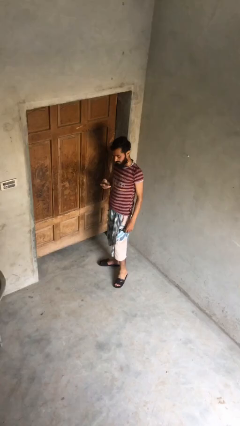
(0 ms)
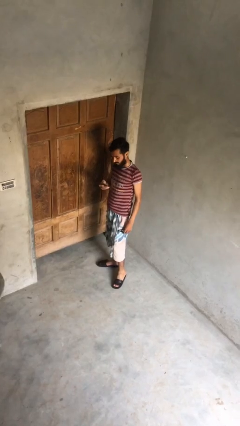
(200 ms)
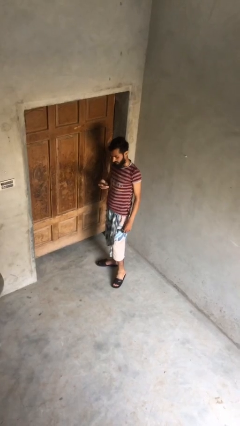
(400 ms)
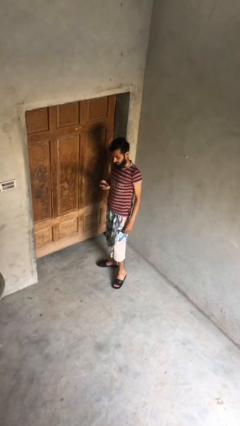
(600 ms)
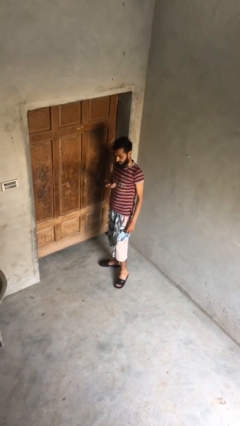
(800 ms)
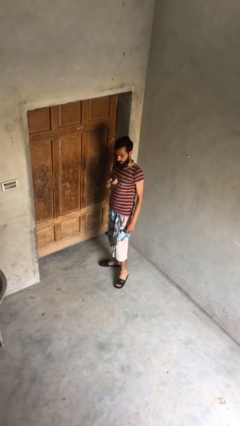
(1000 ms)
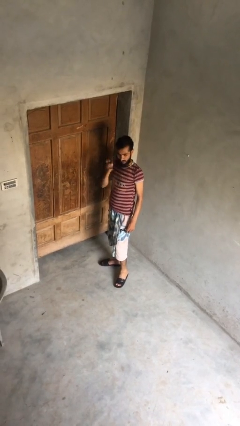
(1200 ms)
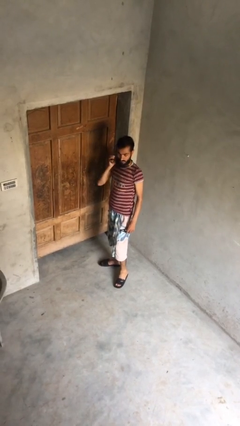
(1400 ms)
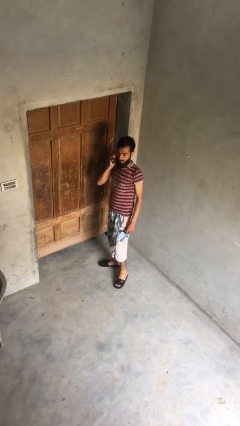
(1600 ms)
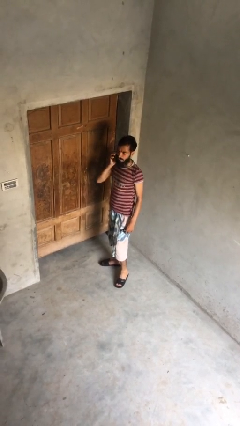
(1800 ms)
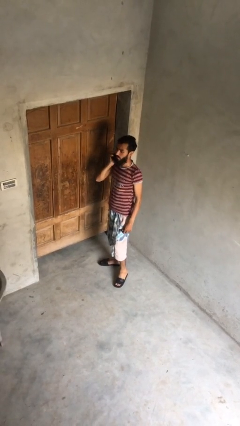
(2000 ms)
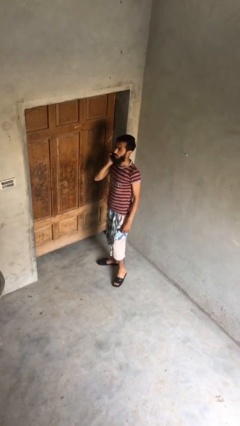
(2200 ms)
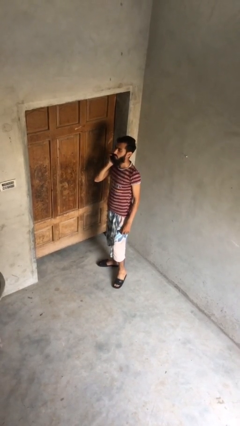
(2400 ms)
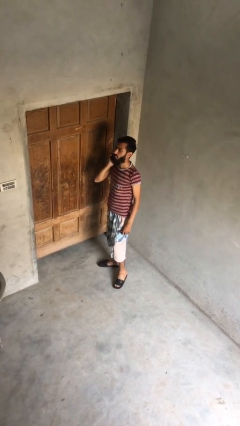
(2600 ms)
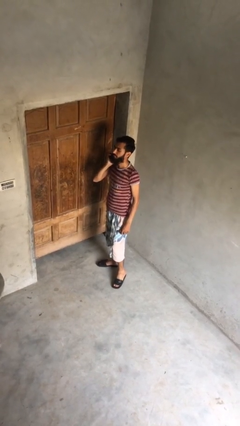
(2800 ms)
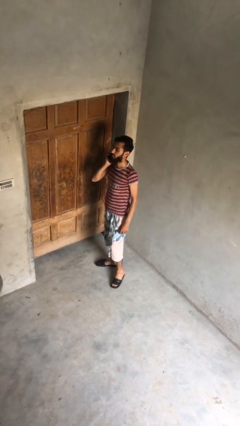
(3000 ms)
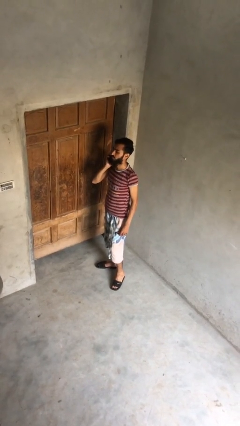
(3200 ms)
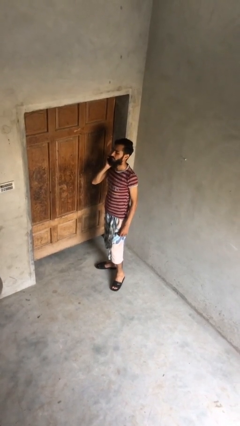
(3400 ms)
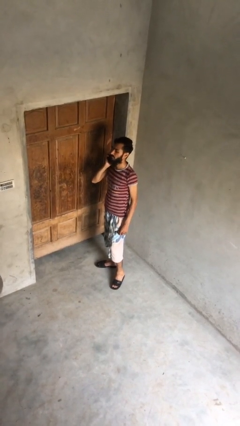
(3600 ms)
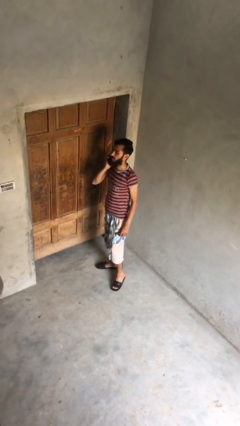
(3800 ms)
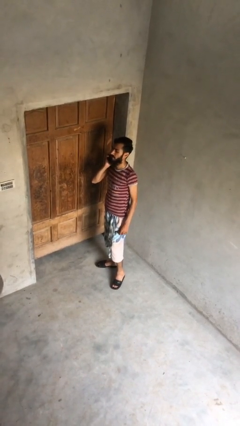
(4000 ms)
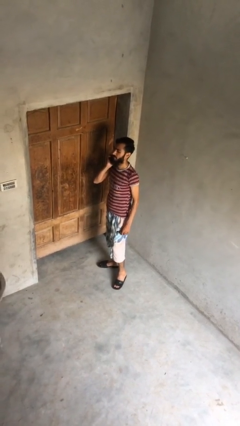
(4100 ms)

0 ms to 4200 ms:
person talks on phone

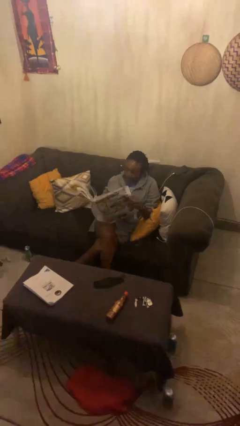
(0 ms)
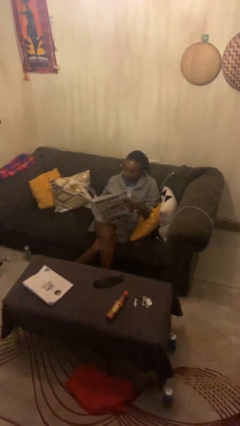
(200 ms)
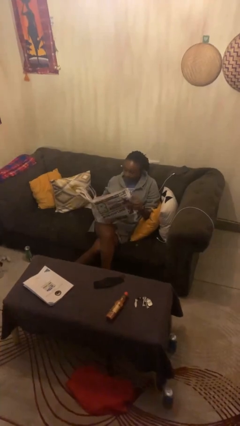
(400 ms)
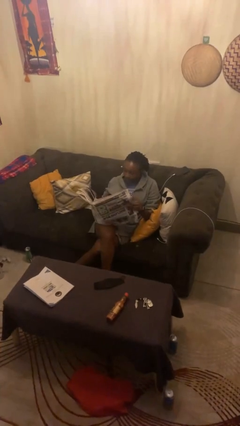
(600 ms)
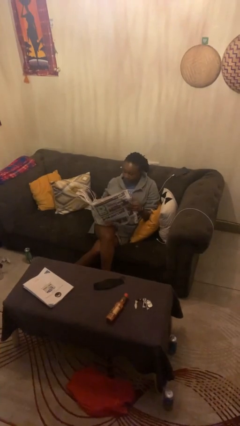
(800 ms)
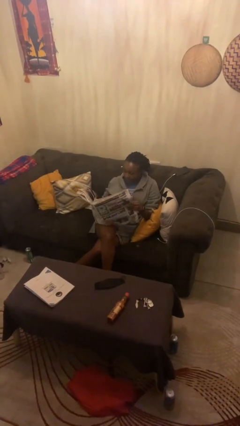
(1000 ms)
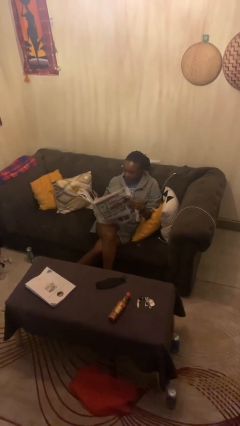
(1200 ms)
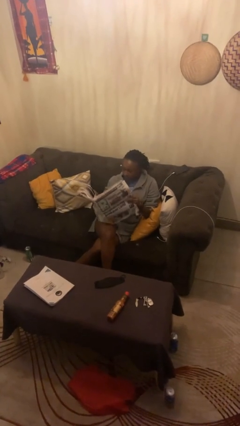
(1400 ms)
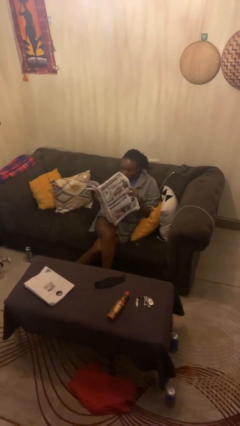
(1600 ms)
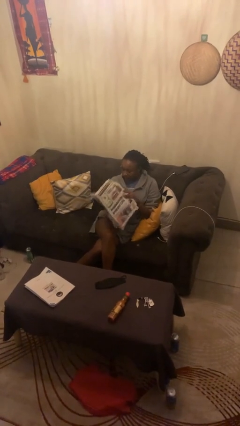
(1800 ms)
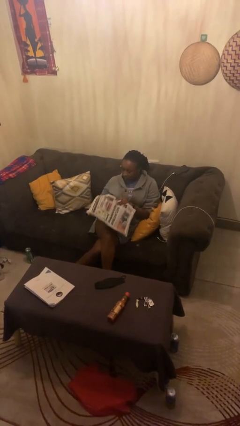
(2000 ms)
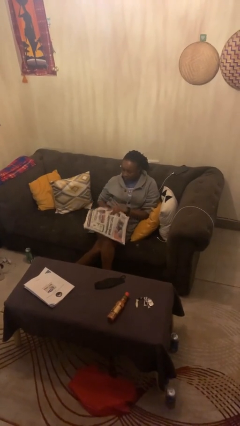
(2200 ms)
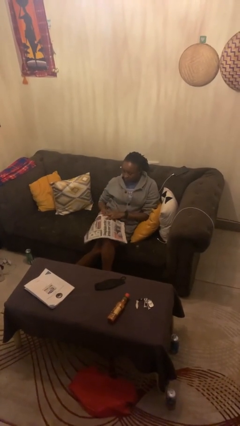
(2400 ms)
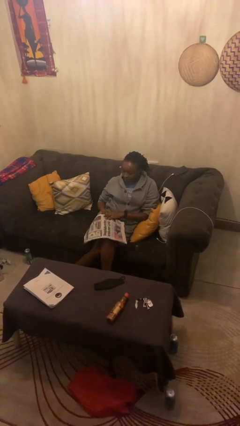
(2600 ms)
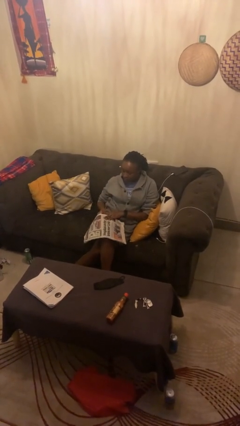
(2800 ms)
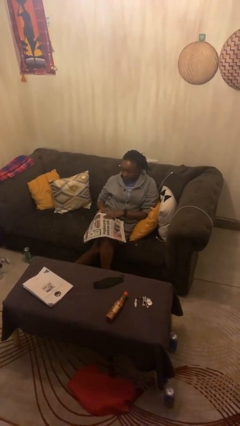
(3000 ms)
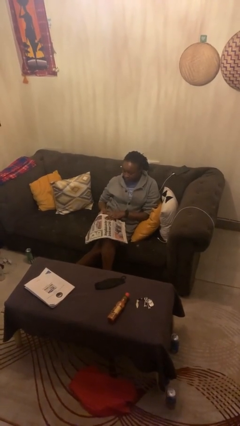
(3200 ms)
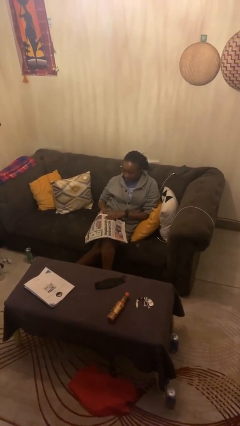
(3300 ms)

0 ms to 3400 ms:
person reads newspaper

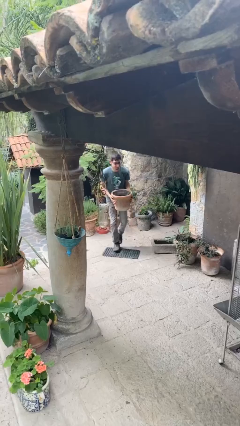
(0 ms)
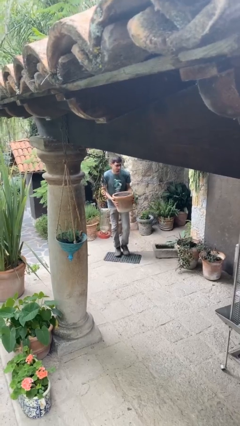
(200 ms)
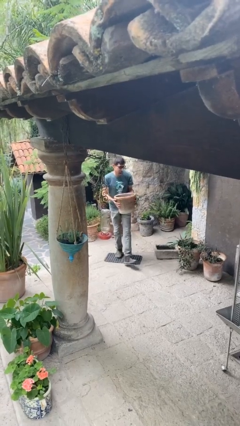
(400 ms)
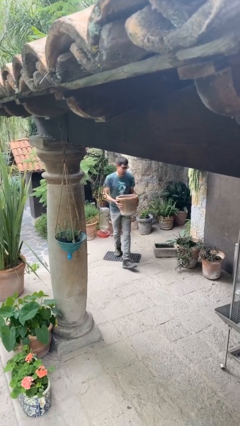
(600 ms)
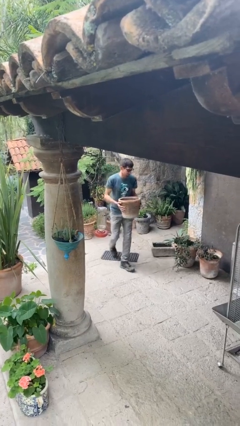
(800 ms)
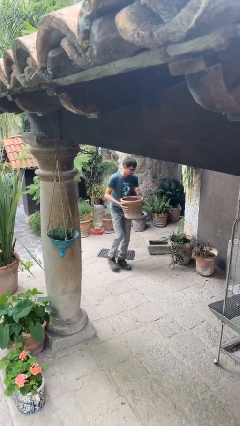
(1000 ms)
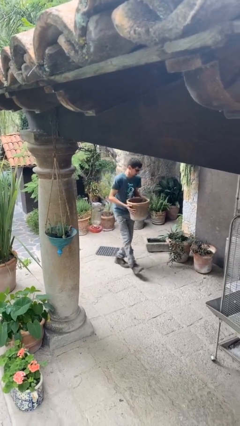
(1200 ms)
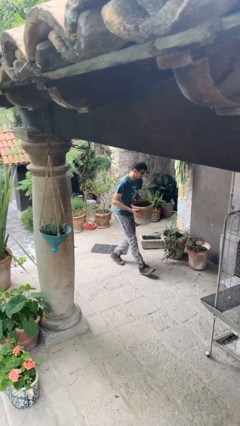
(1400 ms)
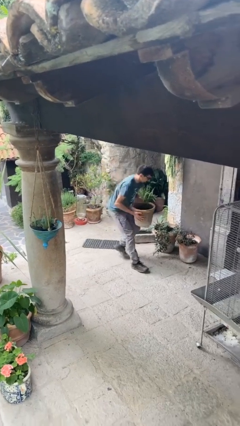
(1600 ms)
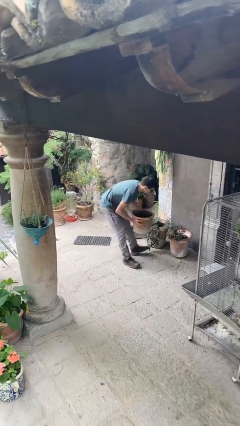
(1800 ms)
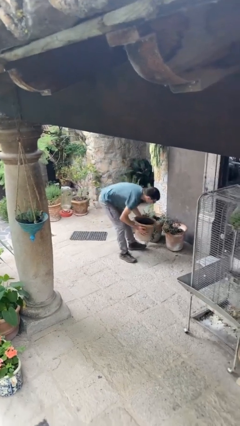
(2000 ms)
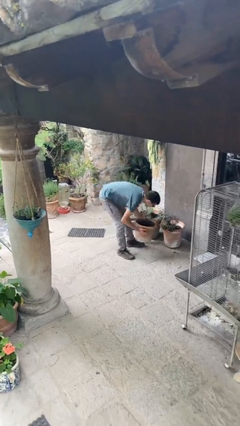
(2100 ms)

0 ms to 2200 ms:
person carries heavy object

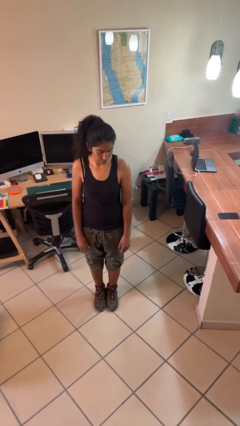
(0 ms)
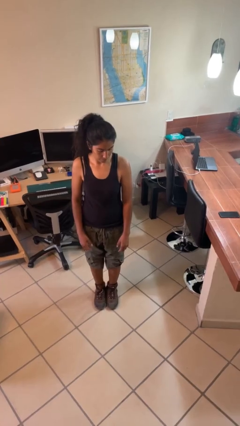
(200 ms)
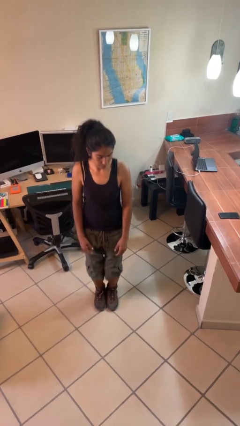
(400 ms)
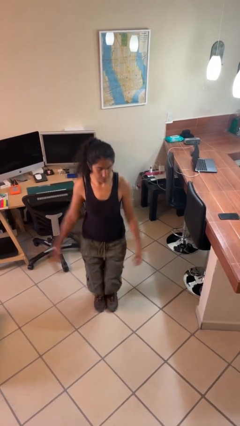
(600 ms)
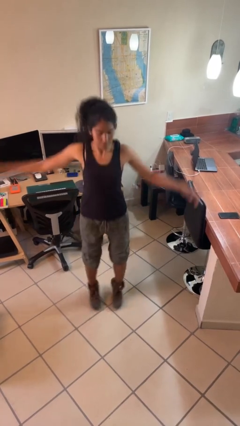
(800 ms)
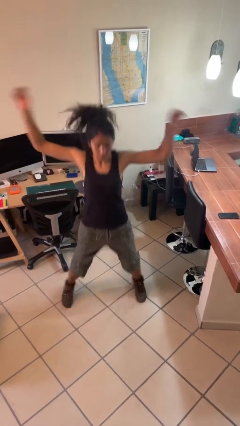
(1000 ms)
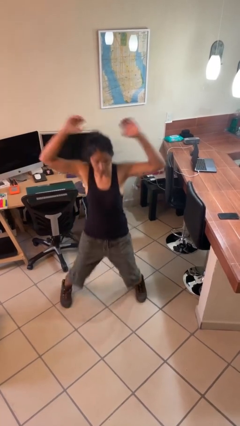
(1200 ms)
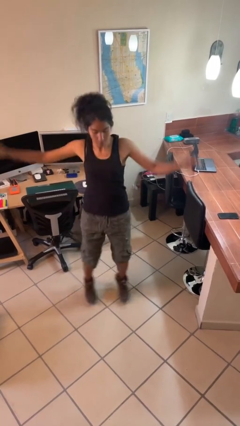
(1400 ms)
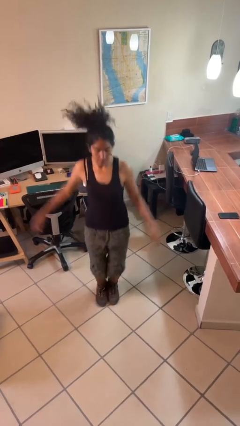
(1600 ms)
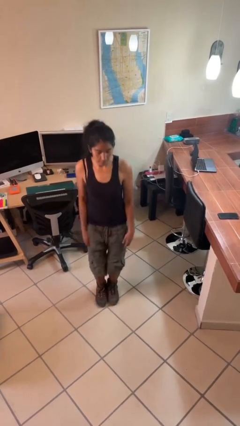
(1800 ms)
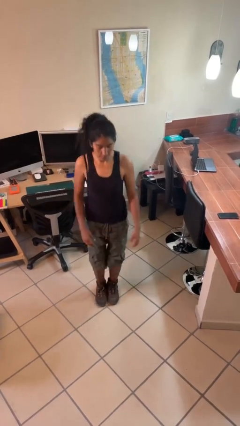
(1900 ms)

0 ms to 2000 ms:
person exercises with jumping jacks

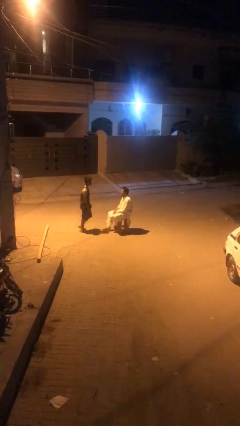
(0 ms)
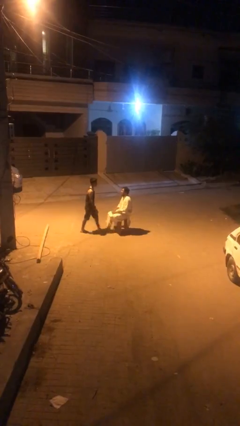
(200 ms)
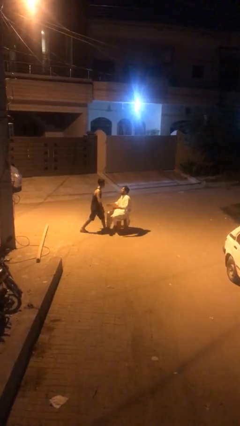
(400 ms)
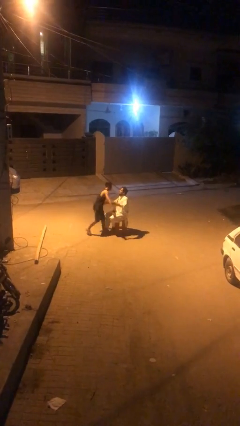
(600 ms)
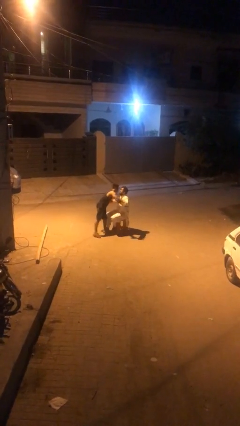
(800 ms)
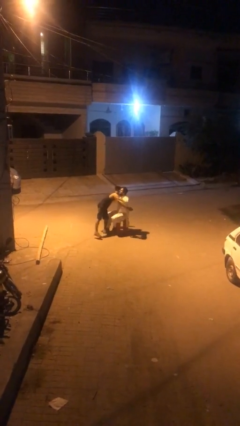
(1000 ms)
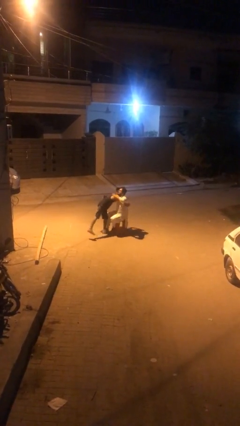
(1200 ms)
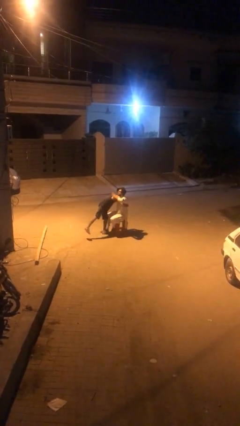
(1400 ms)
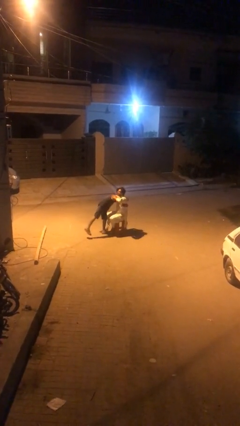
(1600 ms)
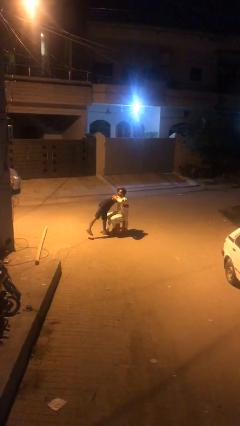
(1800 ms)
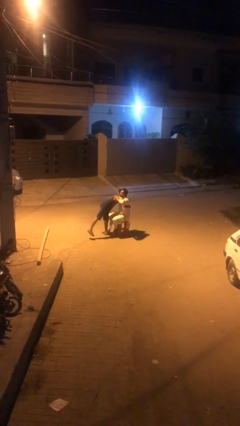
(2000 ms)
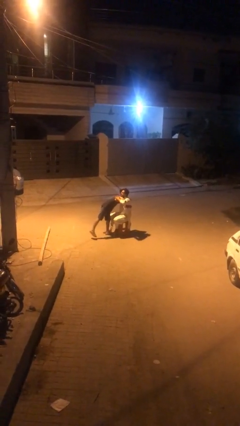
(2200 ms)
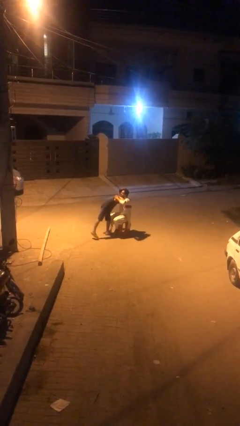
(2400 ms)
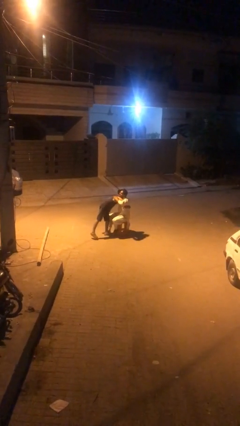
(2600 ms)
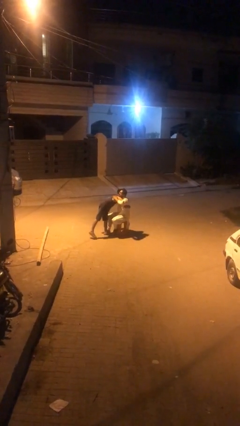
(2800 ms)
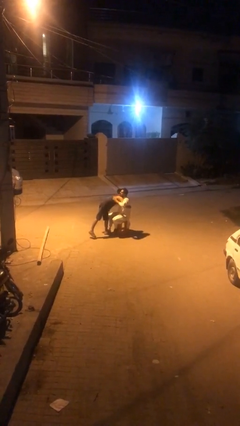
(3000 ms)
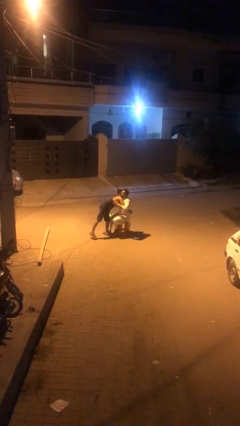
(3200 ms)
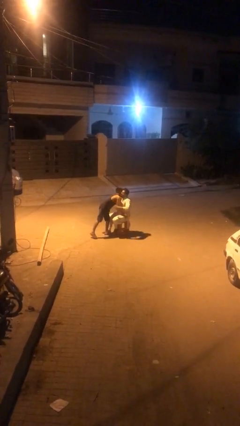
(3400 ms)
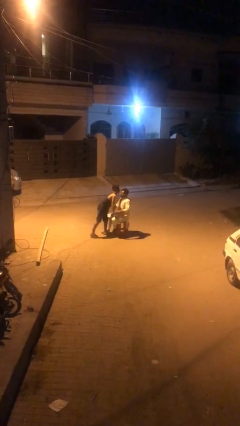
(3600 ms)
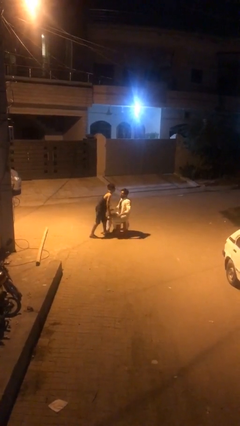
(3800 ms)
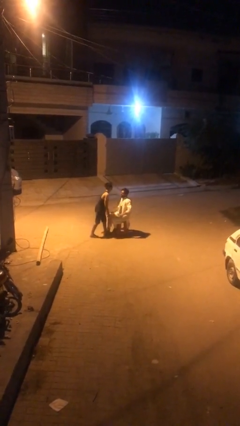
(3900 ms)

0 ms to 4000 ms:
person embraces person

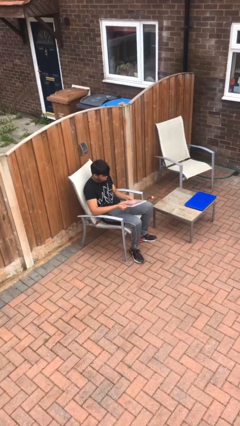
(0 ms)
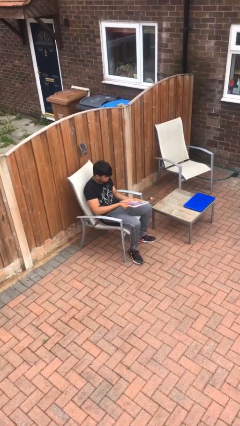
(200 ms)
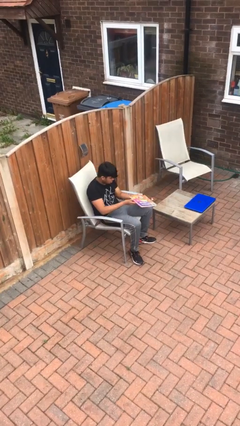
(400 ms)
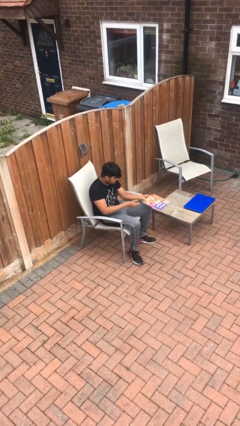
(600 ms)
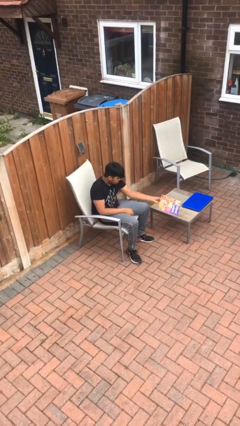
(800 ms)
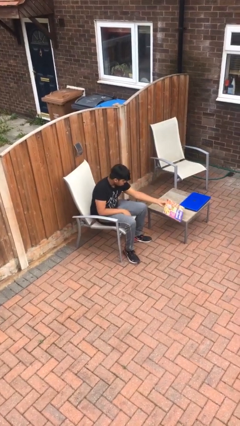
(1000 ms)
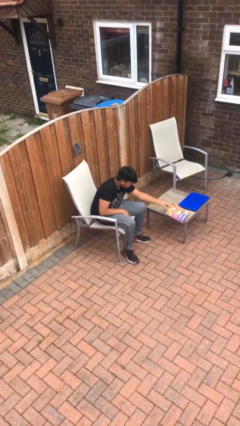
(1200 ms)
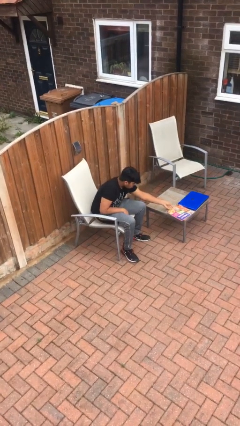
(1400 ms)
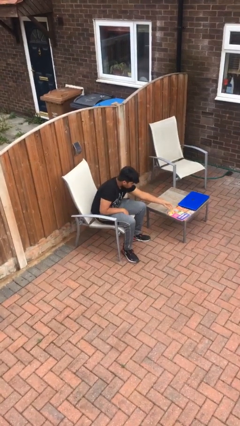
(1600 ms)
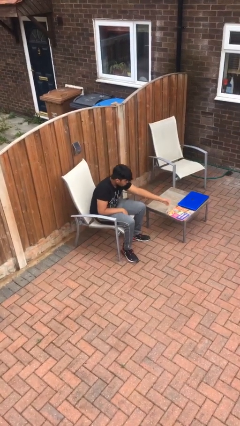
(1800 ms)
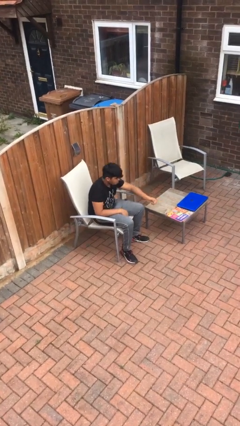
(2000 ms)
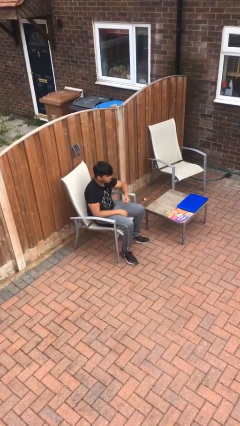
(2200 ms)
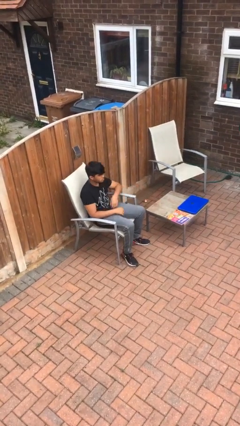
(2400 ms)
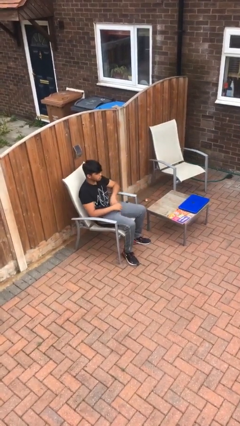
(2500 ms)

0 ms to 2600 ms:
person puts down object on table
